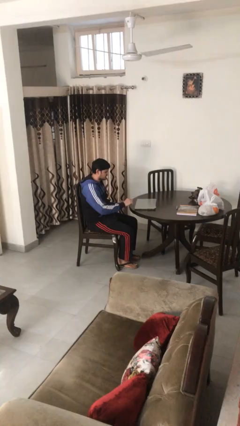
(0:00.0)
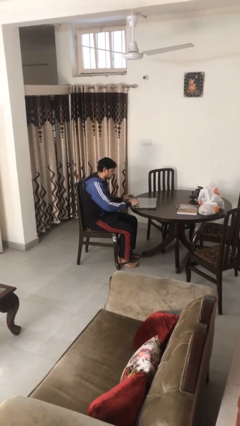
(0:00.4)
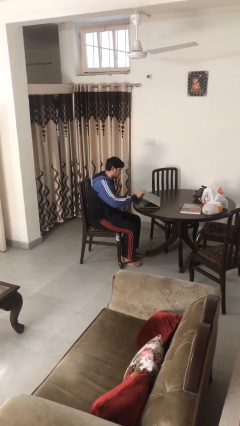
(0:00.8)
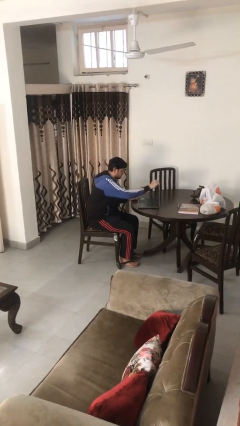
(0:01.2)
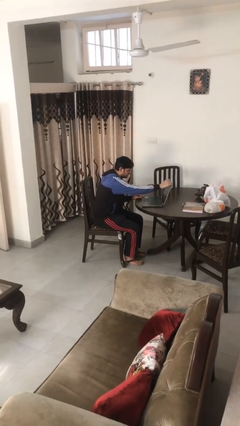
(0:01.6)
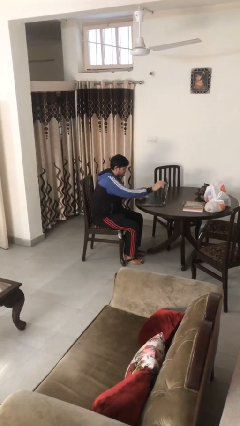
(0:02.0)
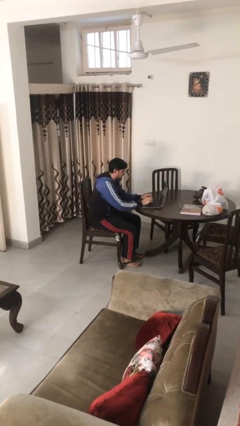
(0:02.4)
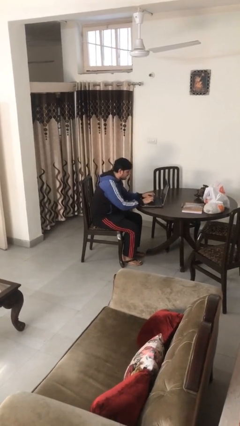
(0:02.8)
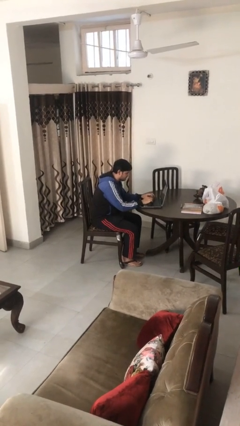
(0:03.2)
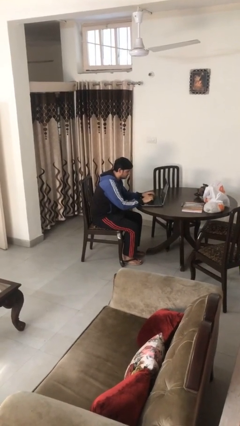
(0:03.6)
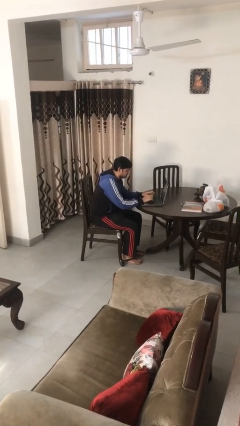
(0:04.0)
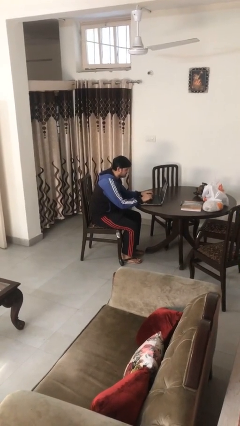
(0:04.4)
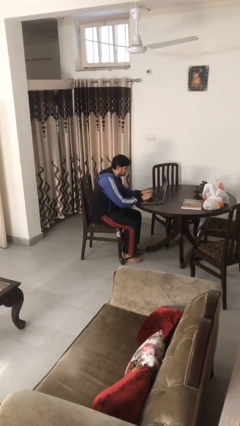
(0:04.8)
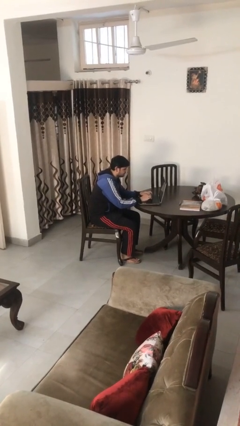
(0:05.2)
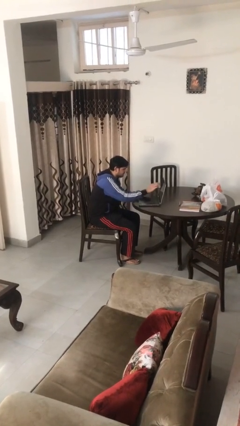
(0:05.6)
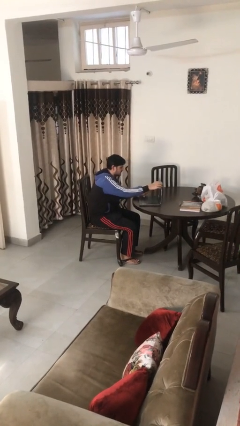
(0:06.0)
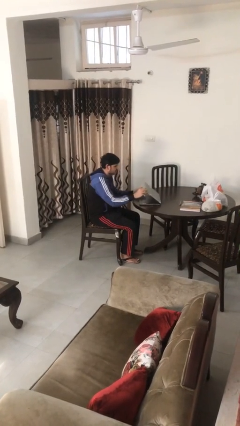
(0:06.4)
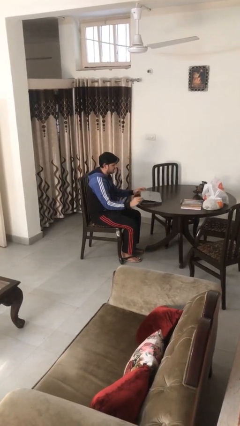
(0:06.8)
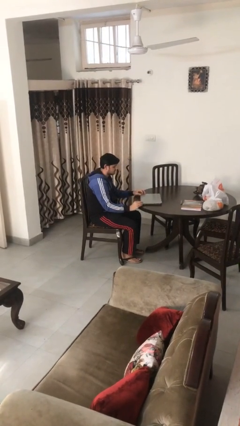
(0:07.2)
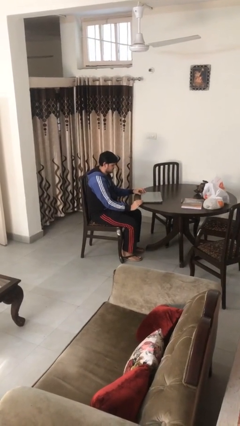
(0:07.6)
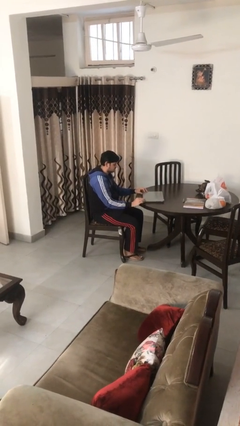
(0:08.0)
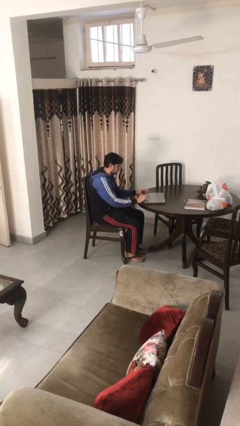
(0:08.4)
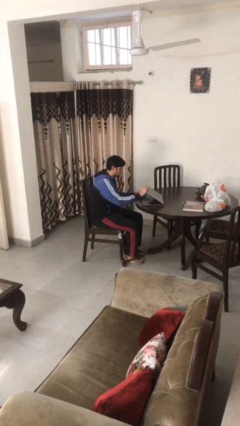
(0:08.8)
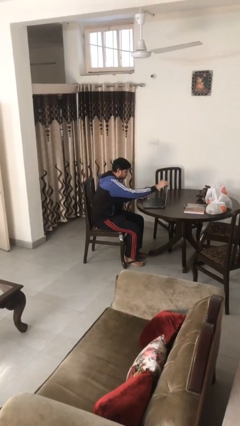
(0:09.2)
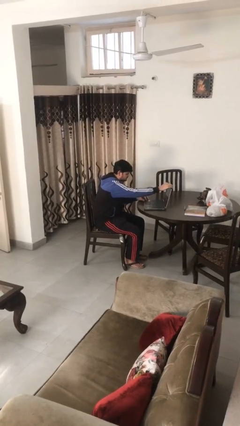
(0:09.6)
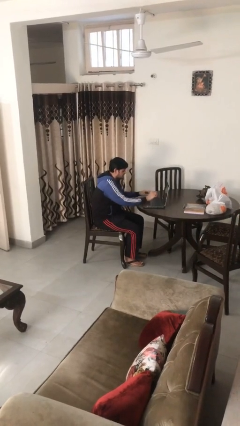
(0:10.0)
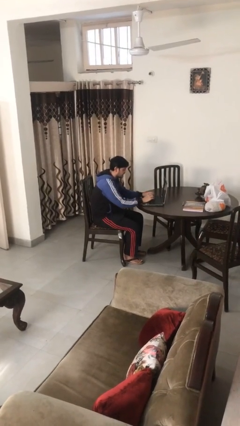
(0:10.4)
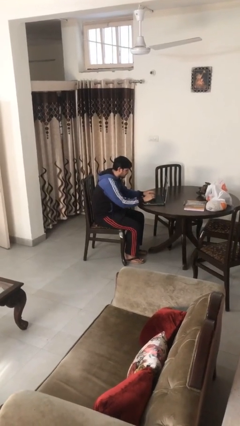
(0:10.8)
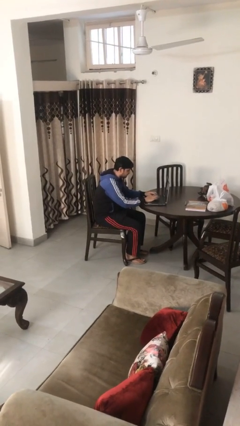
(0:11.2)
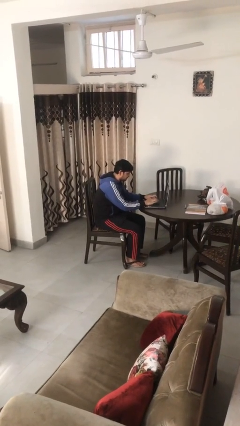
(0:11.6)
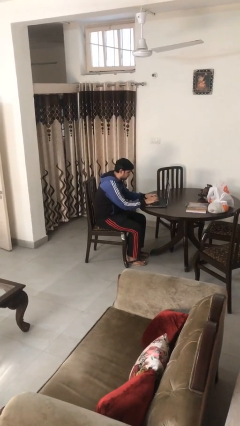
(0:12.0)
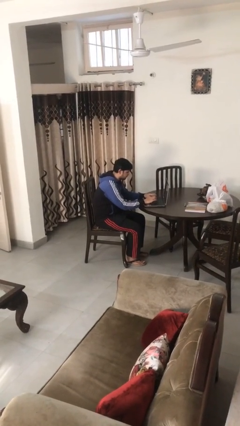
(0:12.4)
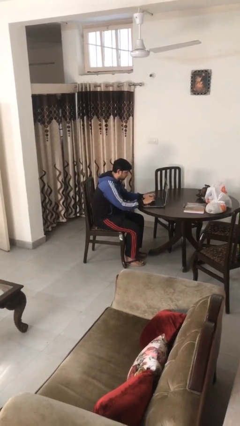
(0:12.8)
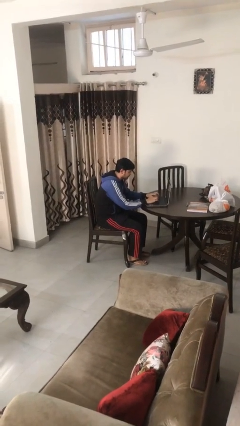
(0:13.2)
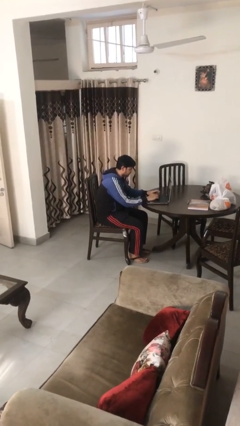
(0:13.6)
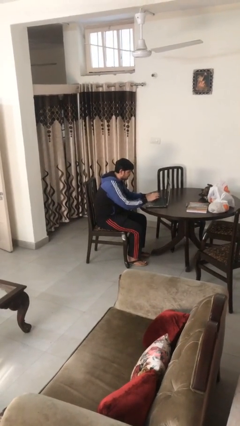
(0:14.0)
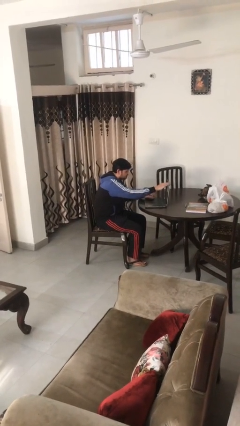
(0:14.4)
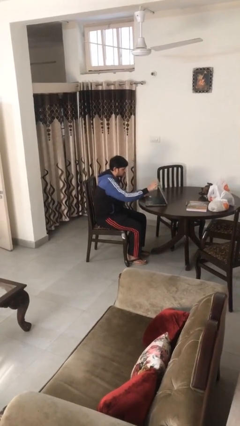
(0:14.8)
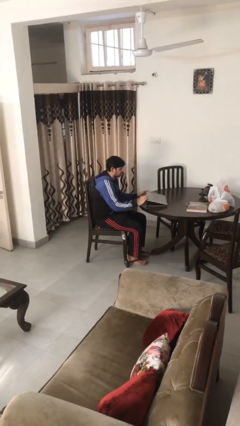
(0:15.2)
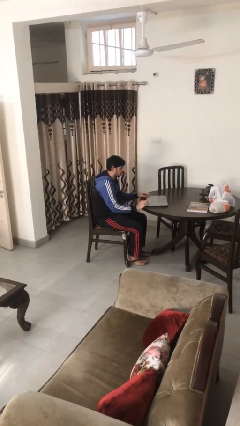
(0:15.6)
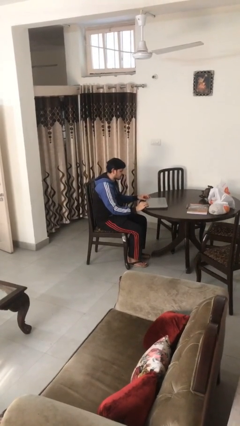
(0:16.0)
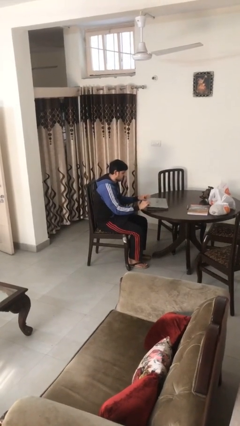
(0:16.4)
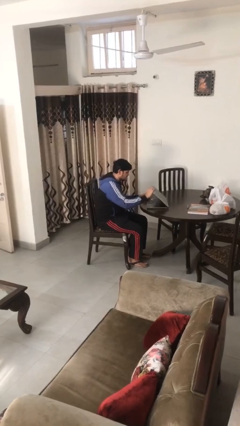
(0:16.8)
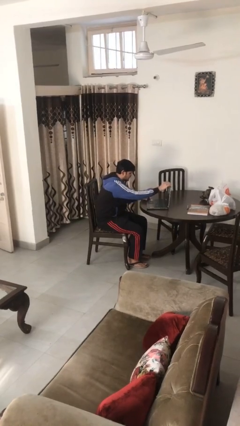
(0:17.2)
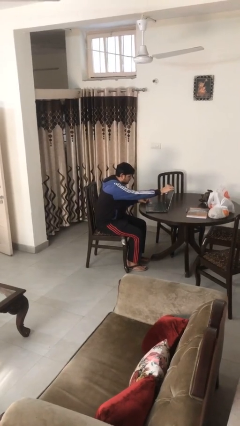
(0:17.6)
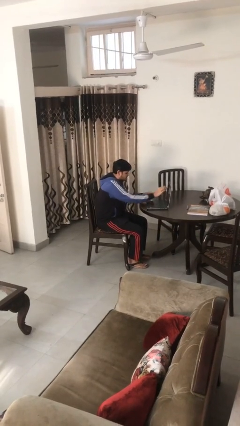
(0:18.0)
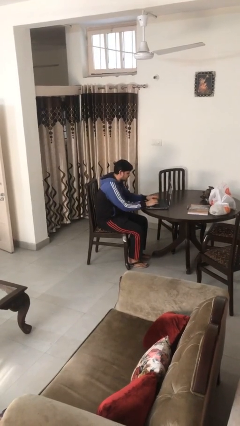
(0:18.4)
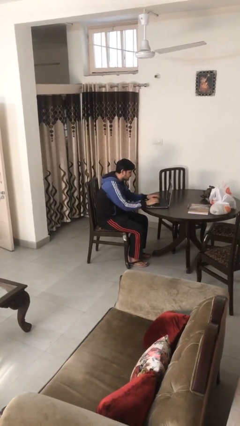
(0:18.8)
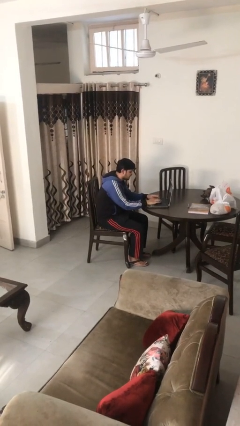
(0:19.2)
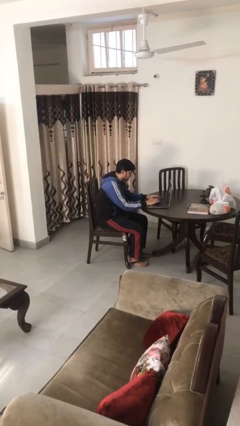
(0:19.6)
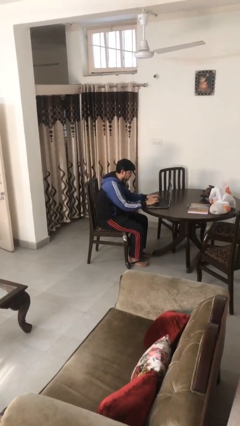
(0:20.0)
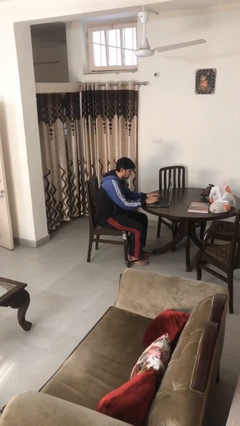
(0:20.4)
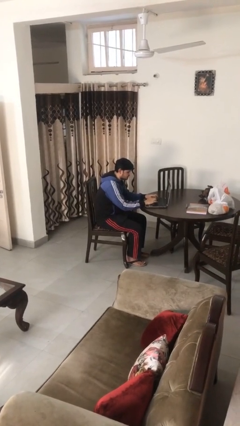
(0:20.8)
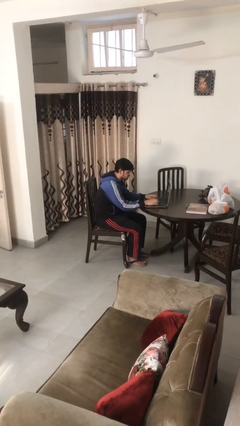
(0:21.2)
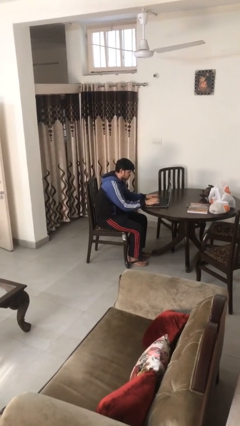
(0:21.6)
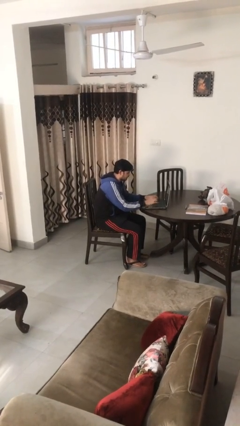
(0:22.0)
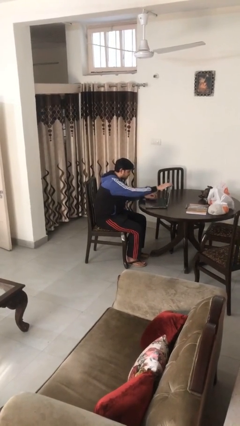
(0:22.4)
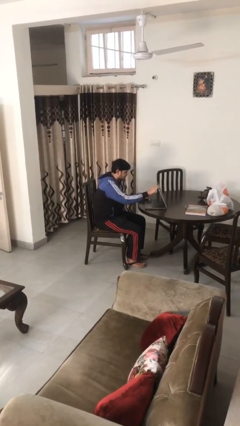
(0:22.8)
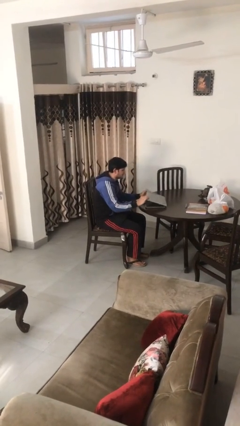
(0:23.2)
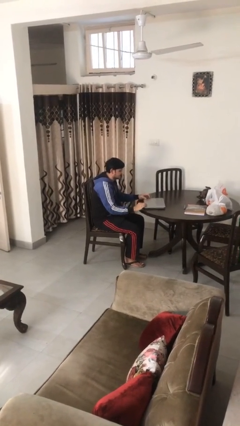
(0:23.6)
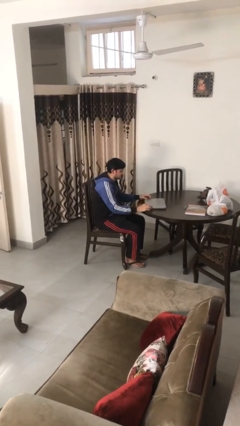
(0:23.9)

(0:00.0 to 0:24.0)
person interacts with laptop

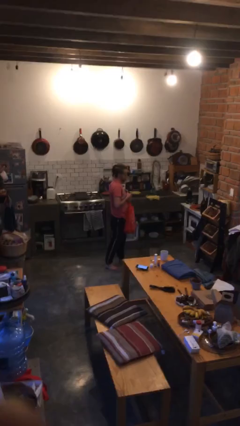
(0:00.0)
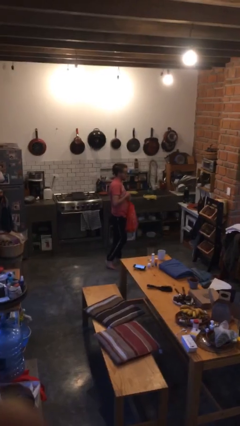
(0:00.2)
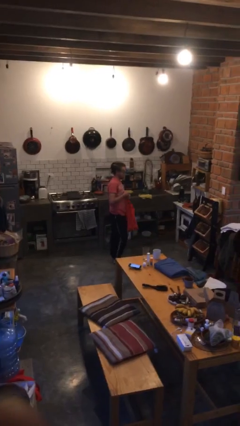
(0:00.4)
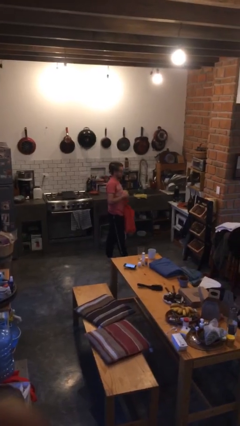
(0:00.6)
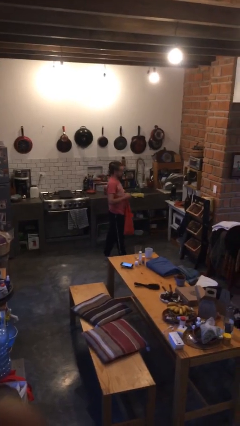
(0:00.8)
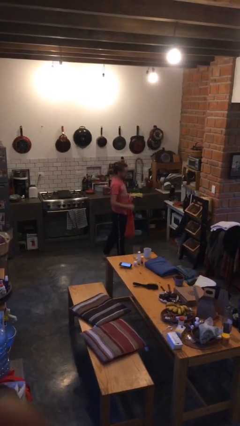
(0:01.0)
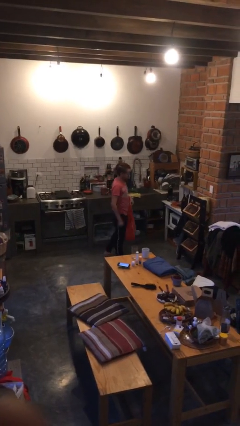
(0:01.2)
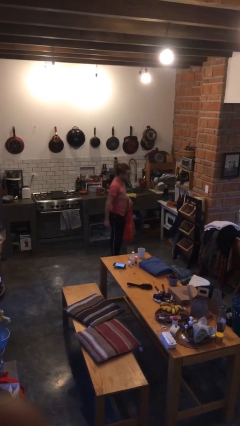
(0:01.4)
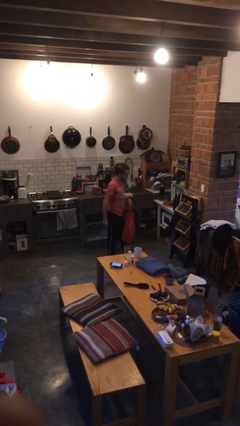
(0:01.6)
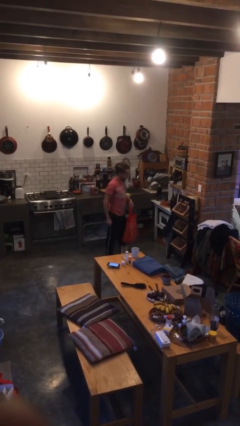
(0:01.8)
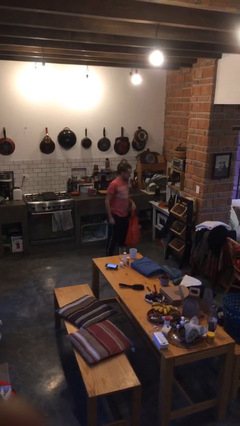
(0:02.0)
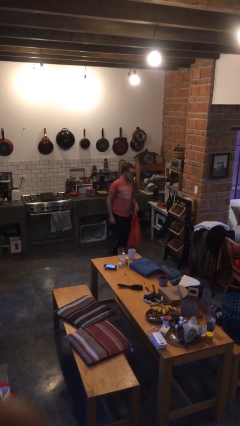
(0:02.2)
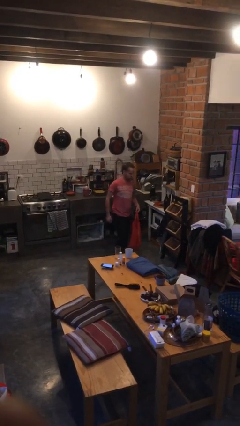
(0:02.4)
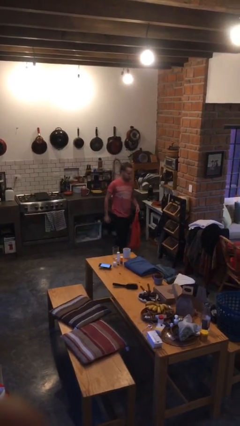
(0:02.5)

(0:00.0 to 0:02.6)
person carries groceries

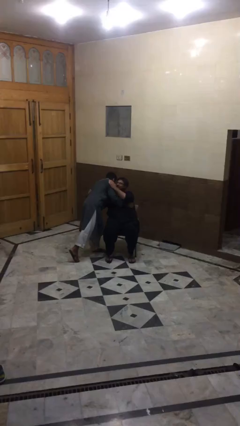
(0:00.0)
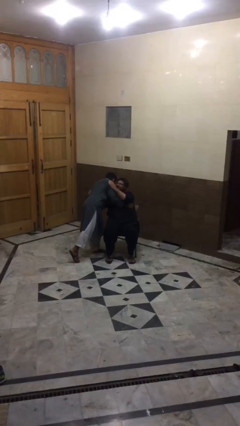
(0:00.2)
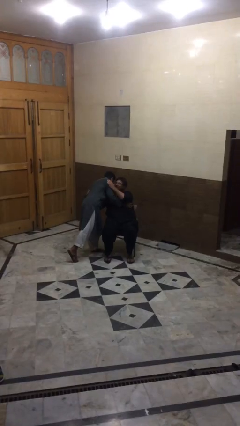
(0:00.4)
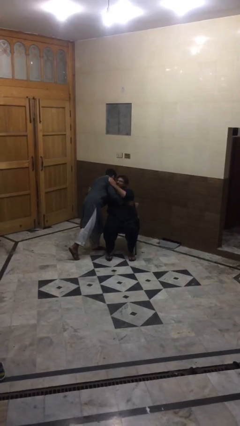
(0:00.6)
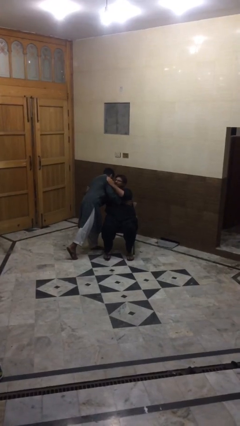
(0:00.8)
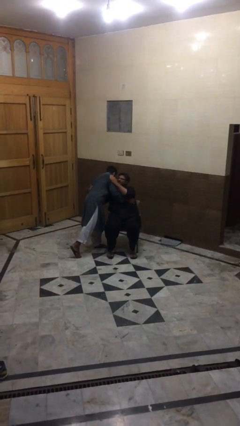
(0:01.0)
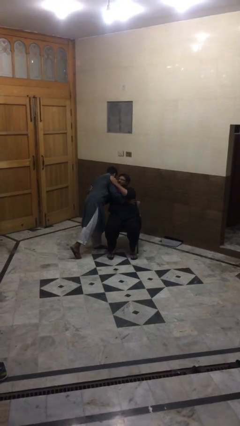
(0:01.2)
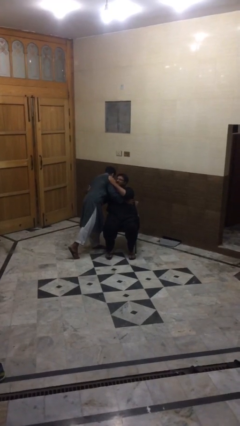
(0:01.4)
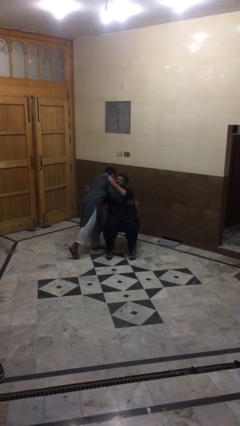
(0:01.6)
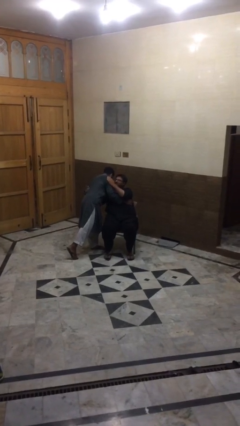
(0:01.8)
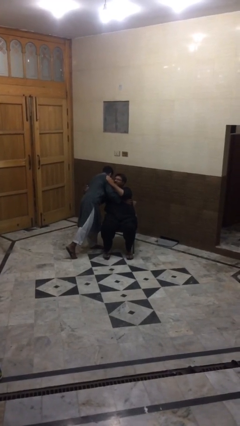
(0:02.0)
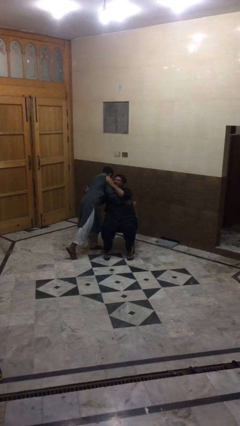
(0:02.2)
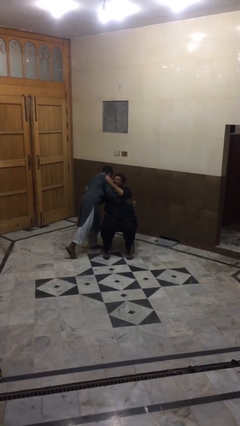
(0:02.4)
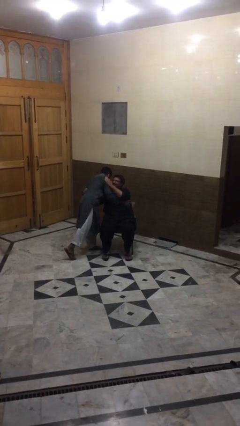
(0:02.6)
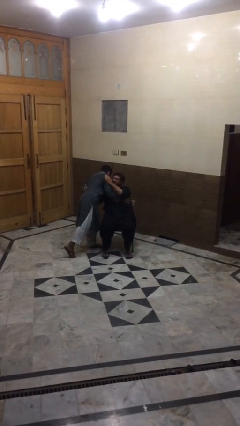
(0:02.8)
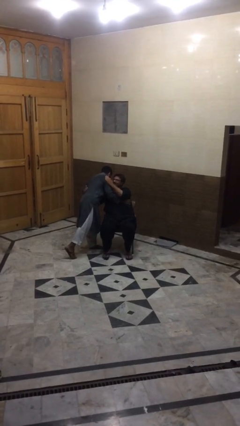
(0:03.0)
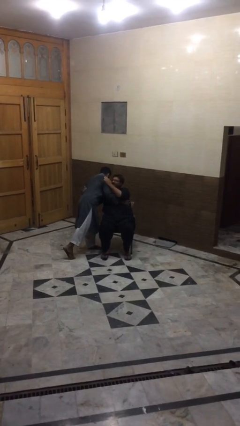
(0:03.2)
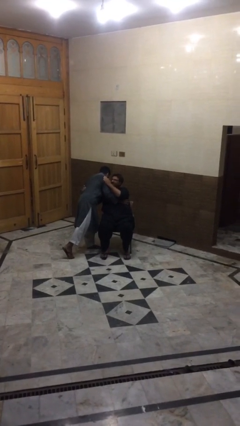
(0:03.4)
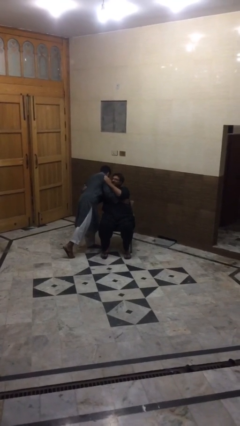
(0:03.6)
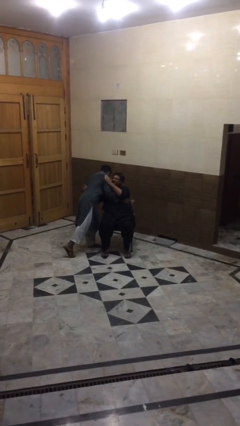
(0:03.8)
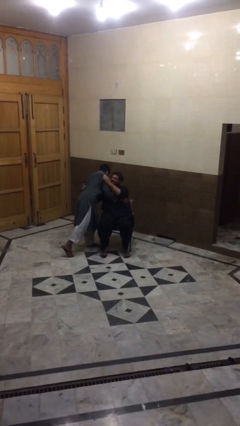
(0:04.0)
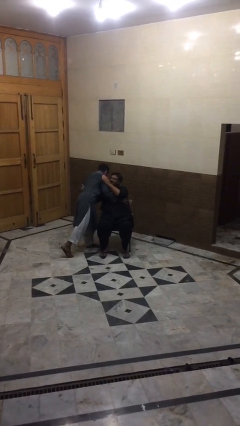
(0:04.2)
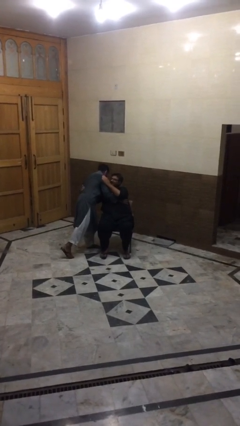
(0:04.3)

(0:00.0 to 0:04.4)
person embraces person
